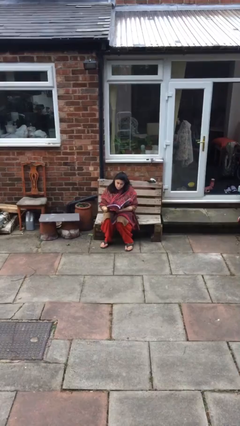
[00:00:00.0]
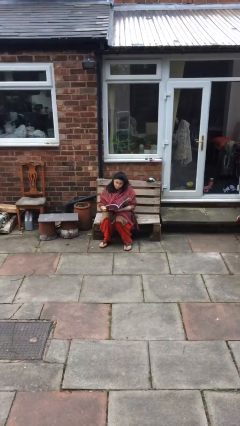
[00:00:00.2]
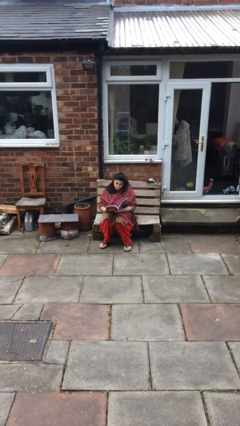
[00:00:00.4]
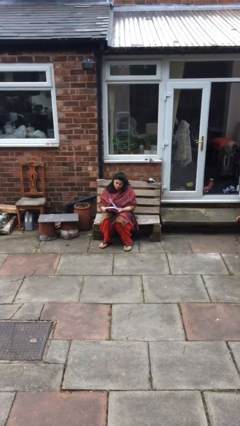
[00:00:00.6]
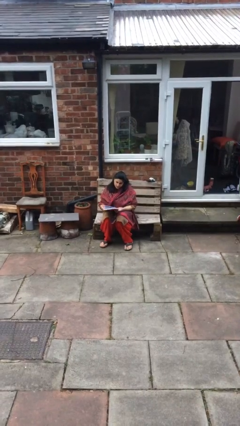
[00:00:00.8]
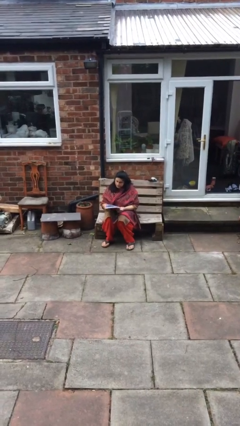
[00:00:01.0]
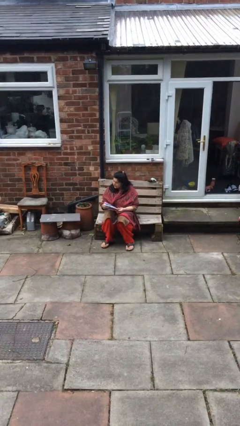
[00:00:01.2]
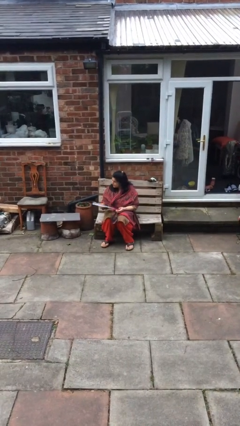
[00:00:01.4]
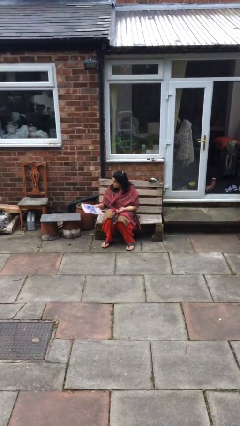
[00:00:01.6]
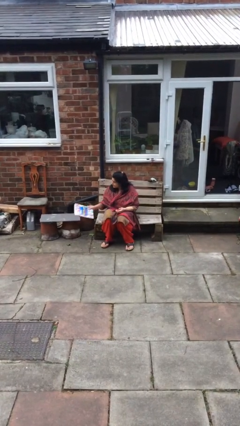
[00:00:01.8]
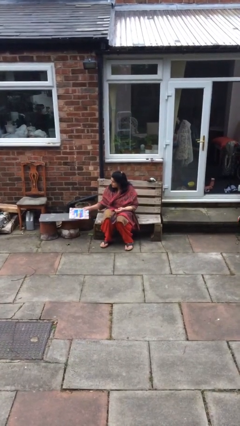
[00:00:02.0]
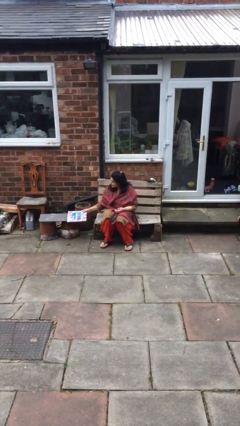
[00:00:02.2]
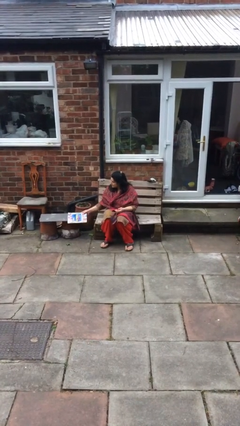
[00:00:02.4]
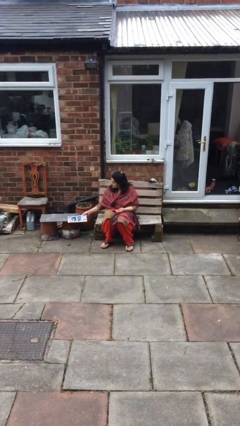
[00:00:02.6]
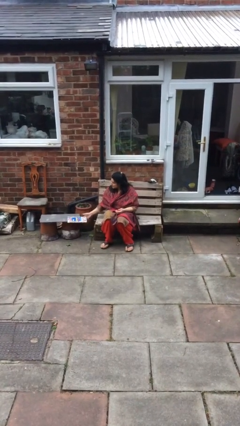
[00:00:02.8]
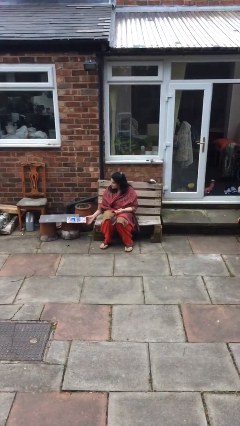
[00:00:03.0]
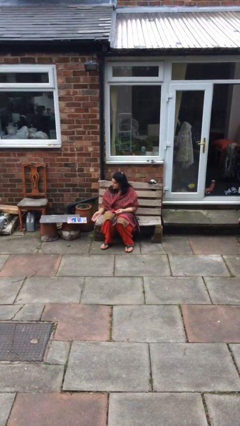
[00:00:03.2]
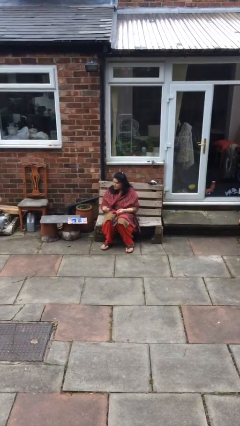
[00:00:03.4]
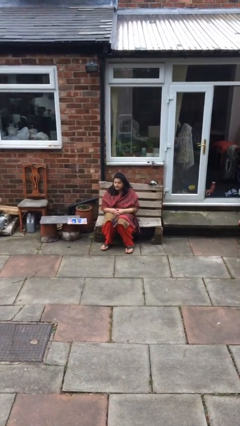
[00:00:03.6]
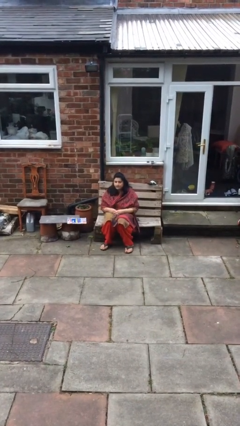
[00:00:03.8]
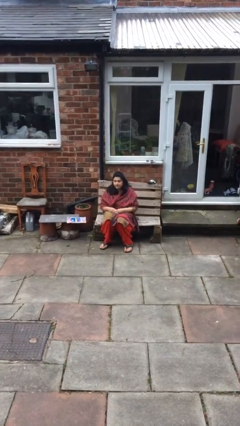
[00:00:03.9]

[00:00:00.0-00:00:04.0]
person puts down object on table

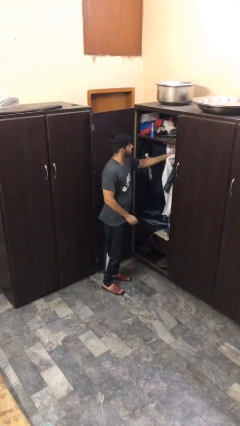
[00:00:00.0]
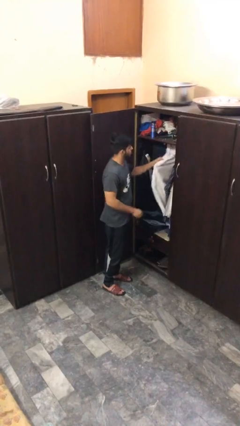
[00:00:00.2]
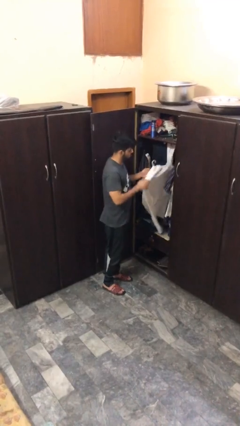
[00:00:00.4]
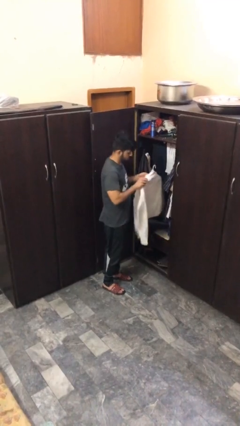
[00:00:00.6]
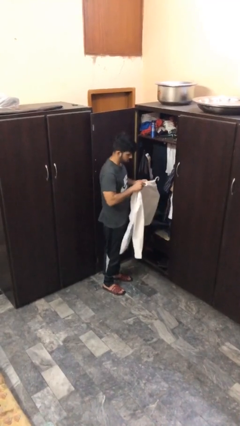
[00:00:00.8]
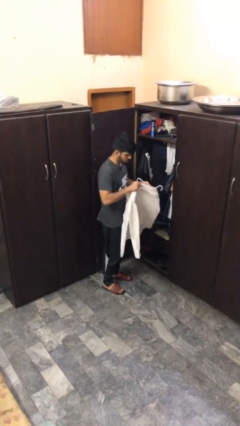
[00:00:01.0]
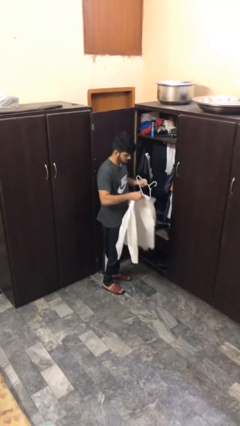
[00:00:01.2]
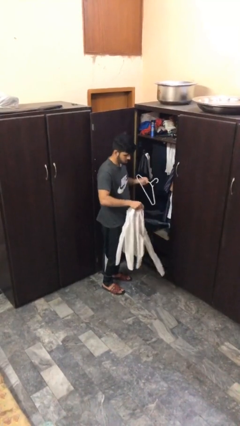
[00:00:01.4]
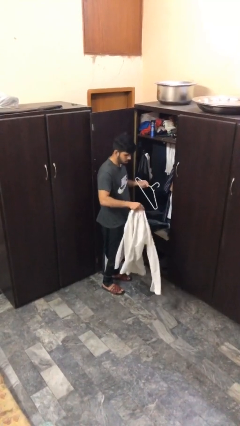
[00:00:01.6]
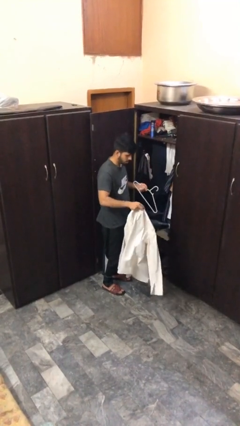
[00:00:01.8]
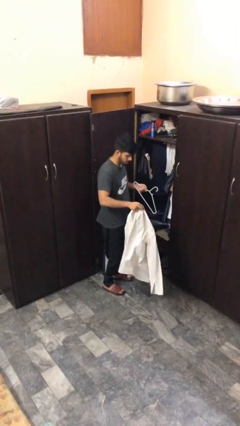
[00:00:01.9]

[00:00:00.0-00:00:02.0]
person takes clothes from closet

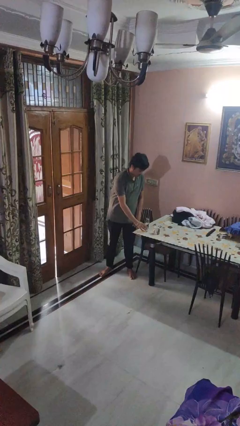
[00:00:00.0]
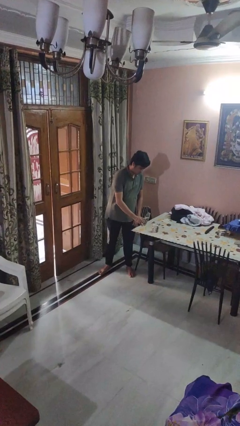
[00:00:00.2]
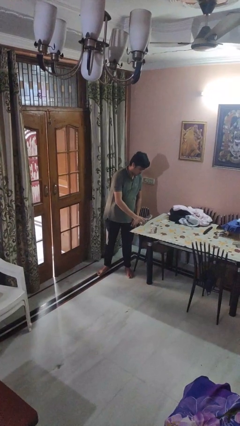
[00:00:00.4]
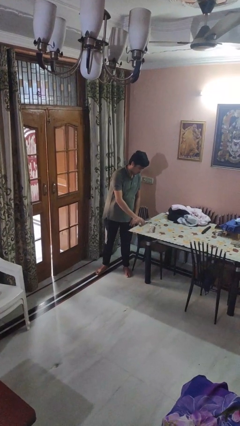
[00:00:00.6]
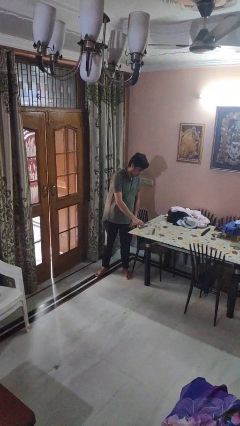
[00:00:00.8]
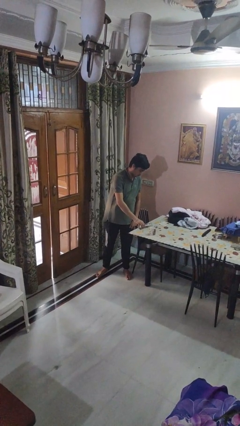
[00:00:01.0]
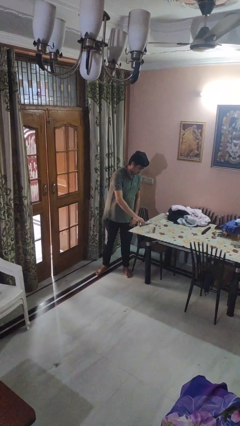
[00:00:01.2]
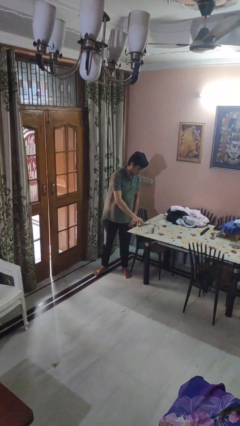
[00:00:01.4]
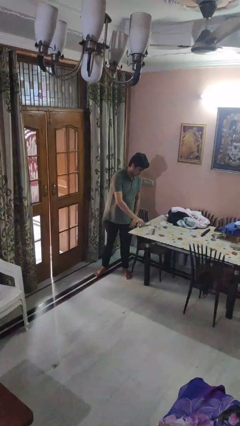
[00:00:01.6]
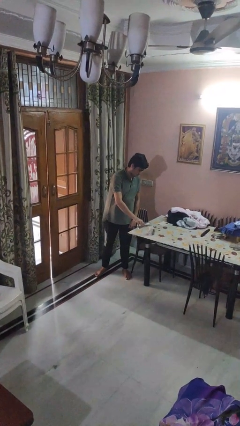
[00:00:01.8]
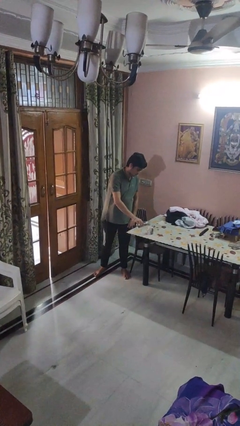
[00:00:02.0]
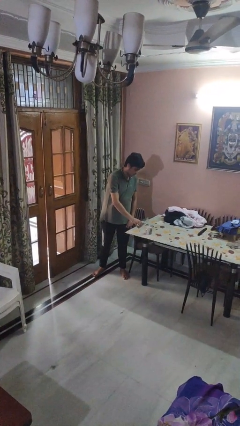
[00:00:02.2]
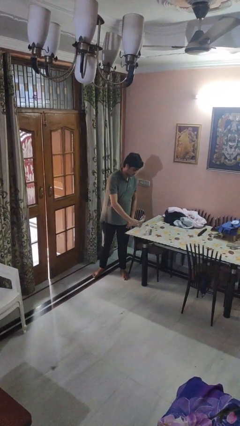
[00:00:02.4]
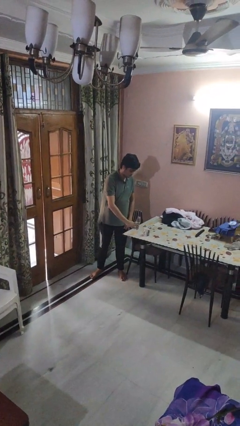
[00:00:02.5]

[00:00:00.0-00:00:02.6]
person pours liquid into cup

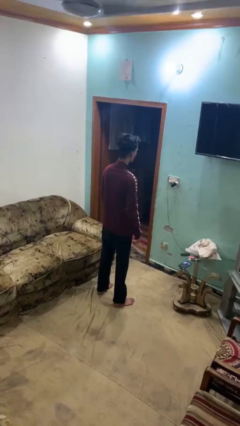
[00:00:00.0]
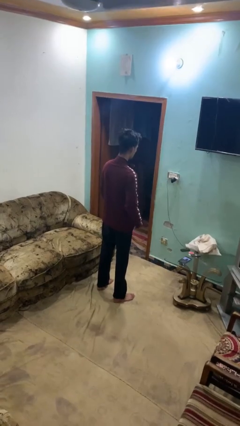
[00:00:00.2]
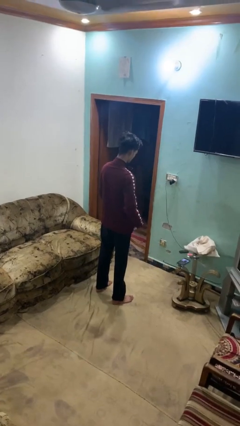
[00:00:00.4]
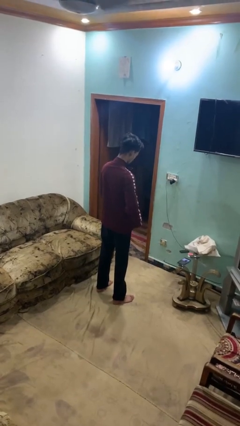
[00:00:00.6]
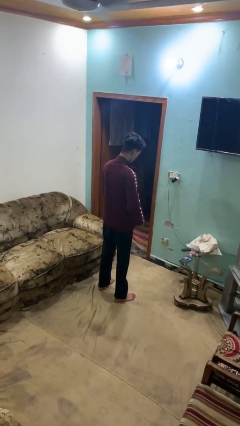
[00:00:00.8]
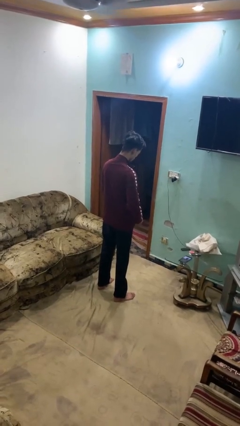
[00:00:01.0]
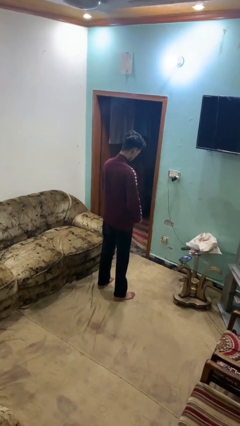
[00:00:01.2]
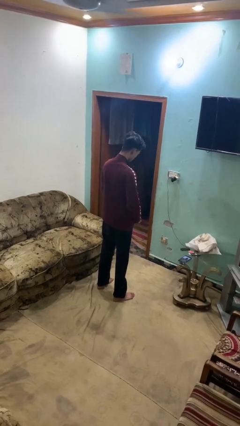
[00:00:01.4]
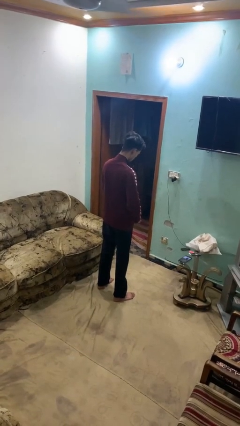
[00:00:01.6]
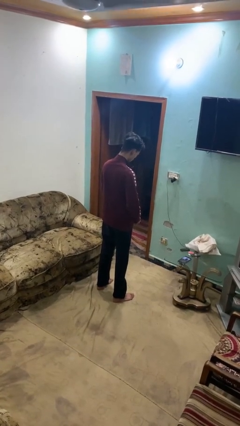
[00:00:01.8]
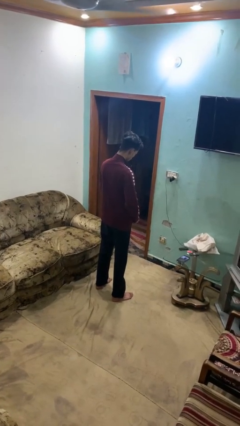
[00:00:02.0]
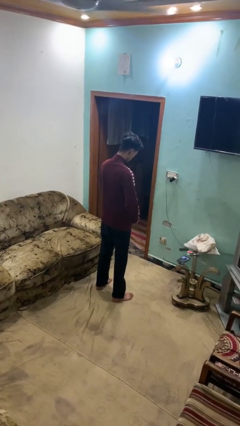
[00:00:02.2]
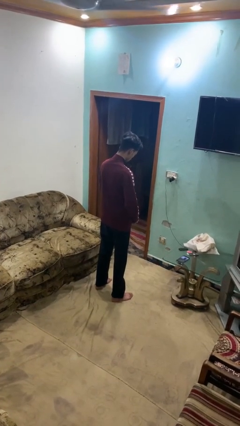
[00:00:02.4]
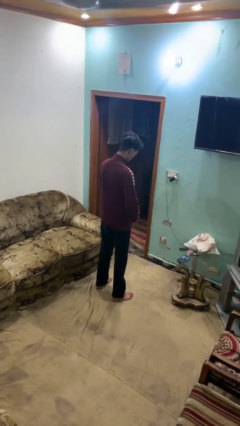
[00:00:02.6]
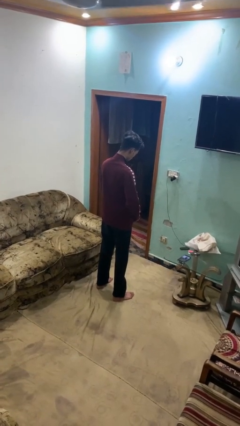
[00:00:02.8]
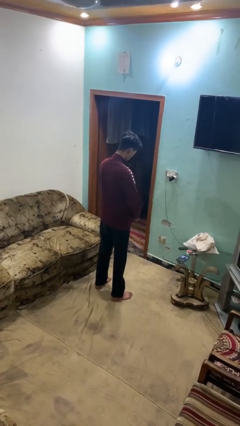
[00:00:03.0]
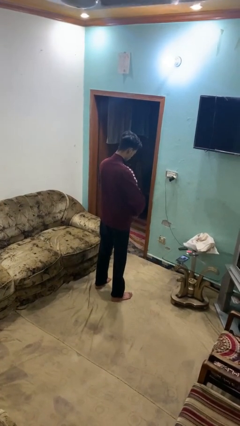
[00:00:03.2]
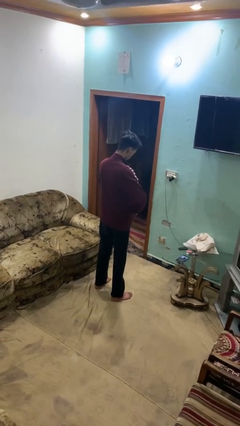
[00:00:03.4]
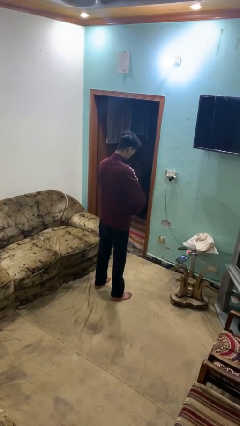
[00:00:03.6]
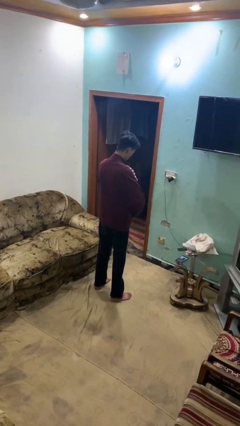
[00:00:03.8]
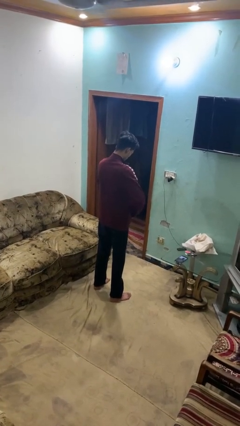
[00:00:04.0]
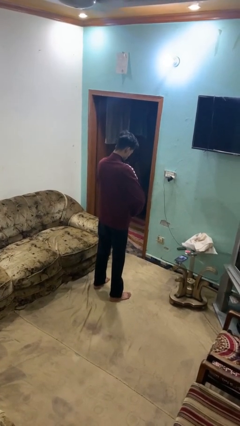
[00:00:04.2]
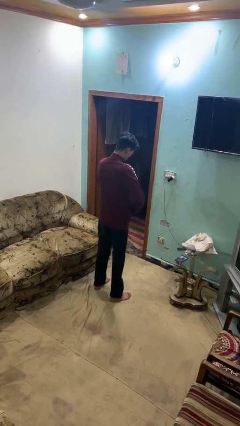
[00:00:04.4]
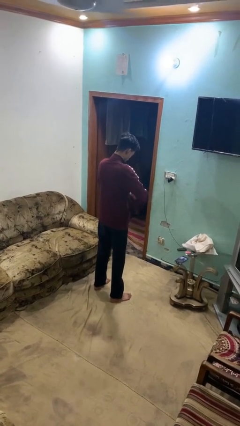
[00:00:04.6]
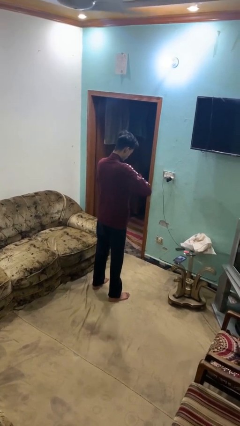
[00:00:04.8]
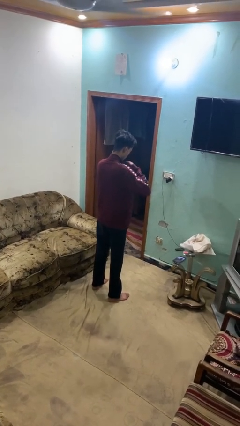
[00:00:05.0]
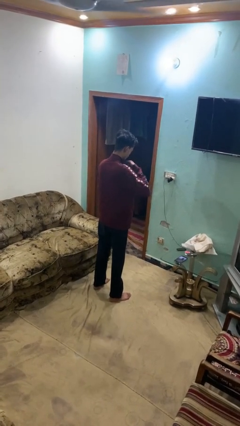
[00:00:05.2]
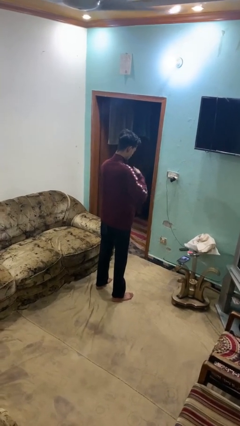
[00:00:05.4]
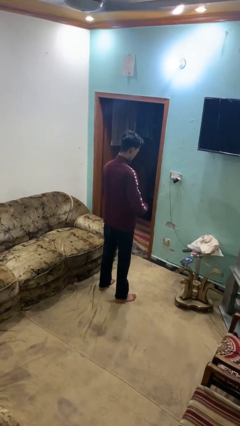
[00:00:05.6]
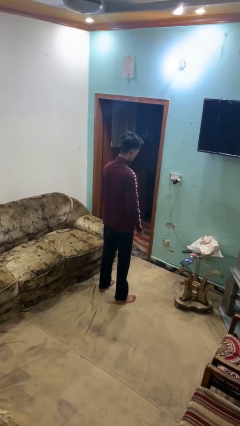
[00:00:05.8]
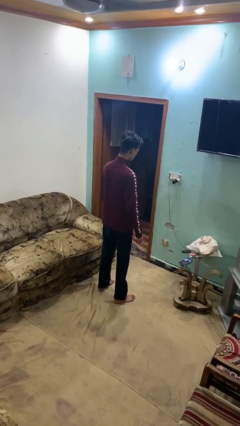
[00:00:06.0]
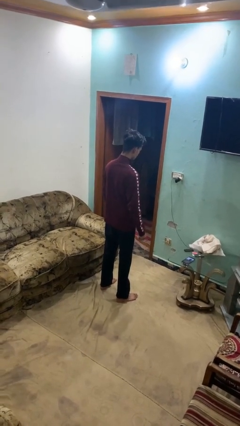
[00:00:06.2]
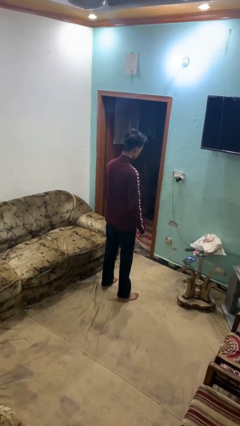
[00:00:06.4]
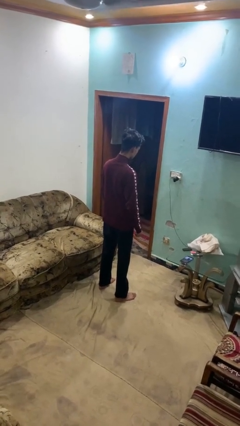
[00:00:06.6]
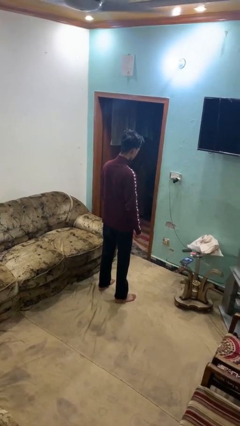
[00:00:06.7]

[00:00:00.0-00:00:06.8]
person zips up jacket

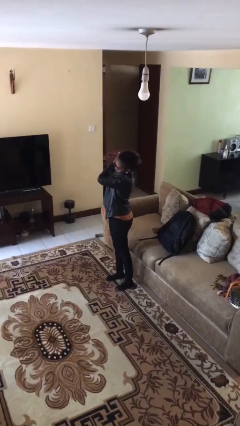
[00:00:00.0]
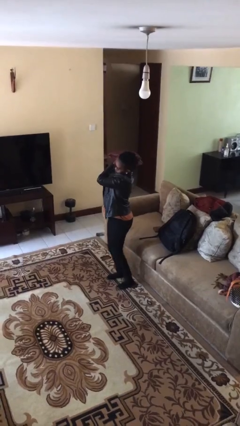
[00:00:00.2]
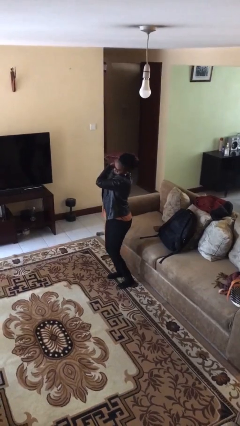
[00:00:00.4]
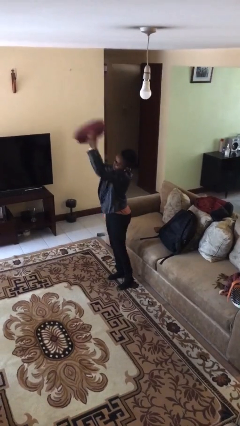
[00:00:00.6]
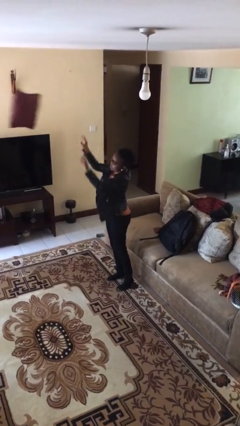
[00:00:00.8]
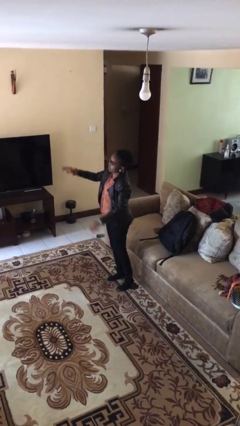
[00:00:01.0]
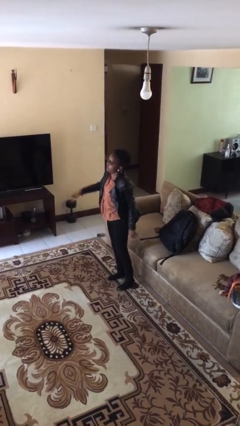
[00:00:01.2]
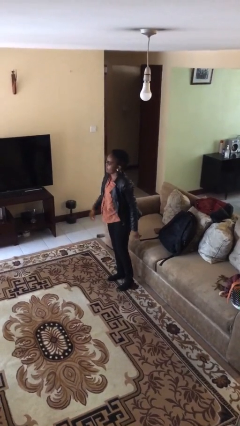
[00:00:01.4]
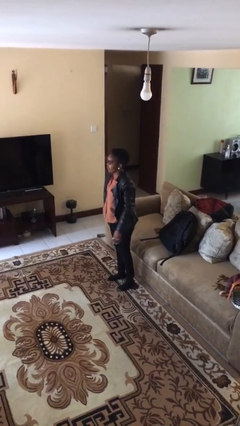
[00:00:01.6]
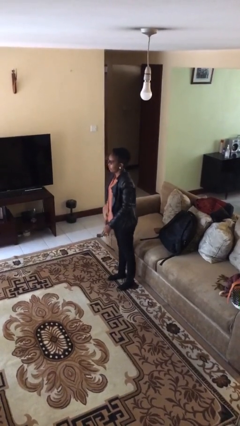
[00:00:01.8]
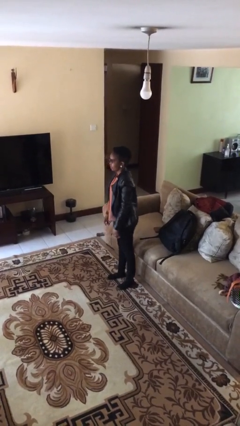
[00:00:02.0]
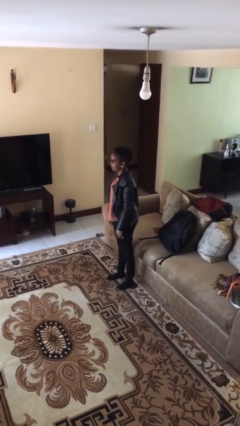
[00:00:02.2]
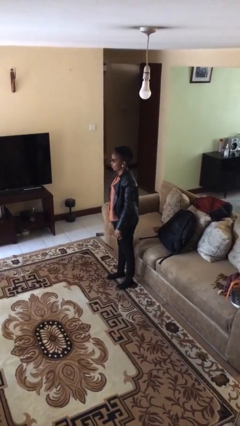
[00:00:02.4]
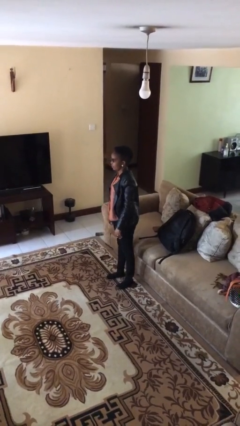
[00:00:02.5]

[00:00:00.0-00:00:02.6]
person throws object to person
